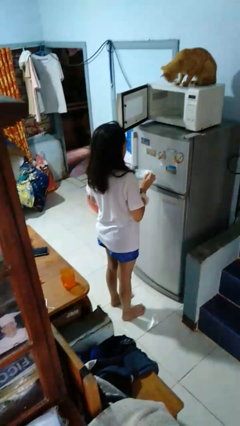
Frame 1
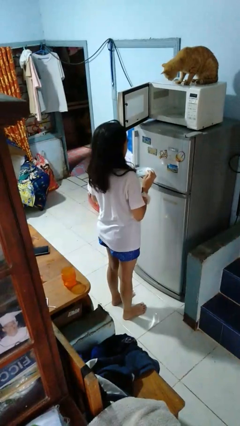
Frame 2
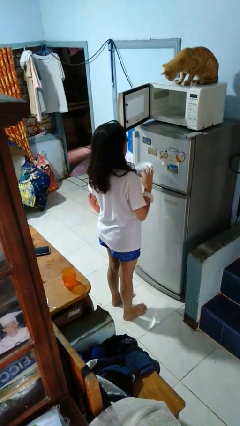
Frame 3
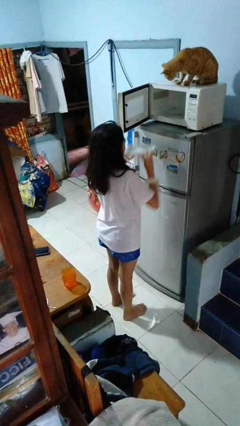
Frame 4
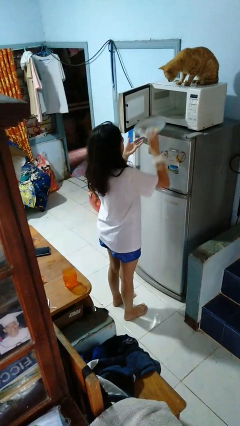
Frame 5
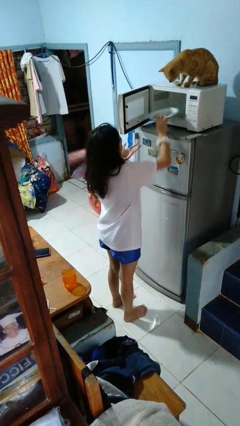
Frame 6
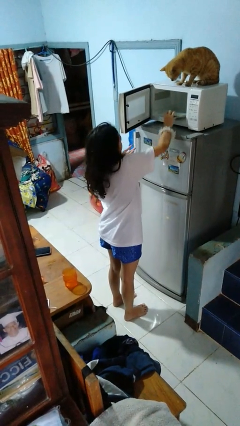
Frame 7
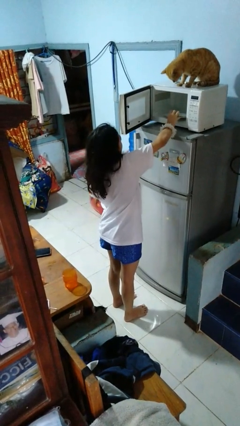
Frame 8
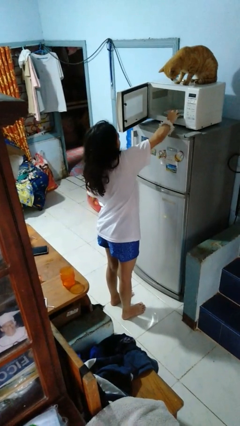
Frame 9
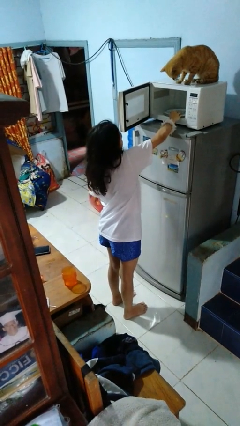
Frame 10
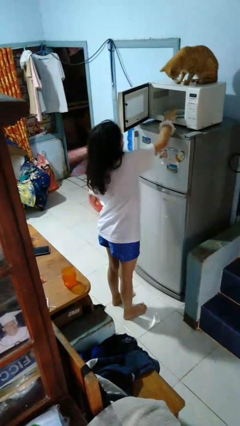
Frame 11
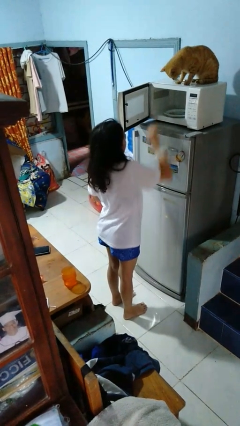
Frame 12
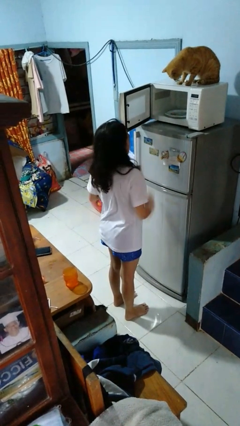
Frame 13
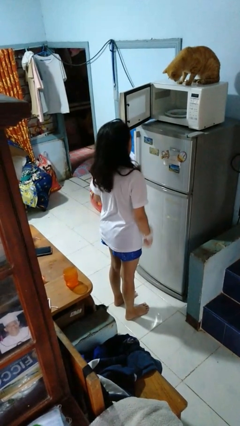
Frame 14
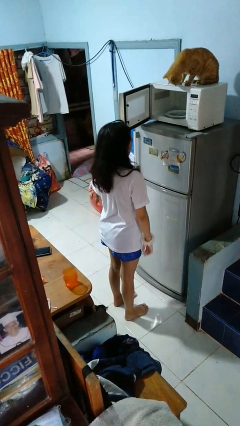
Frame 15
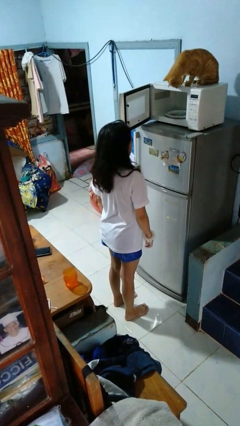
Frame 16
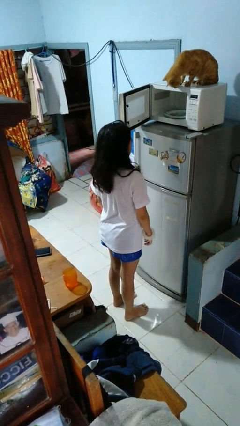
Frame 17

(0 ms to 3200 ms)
person puts object into microwave

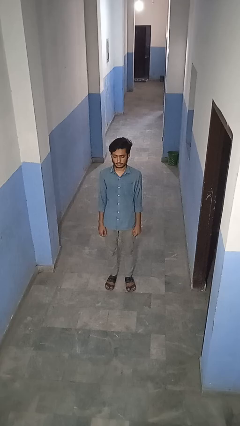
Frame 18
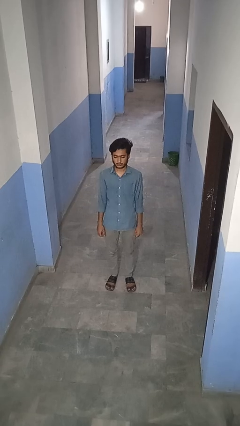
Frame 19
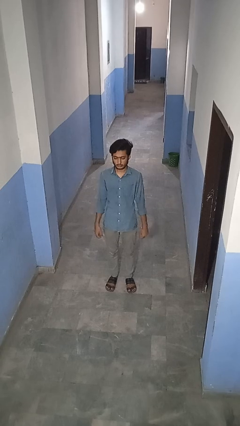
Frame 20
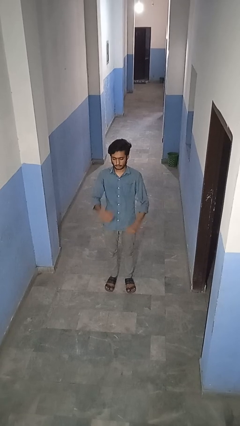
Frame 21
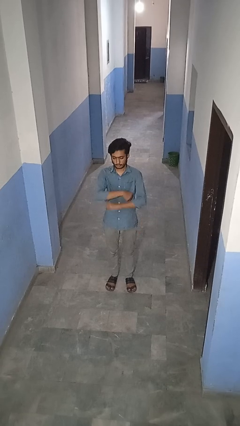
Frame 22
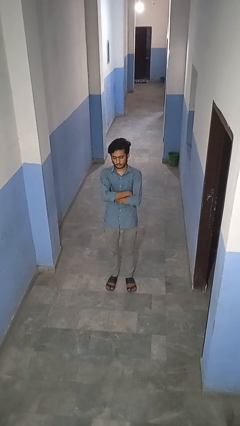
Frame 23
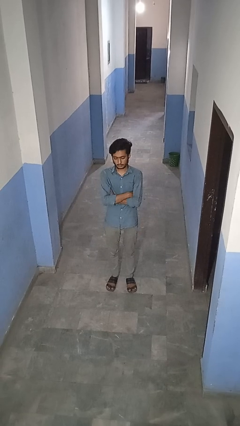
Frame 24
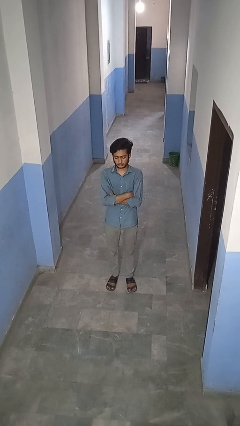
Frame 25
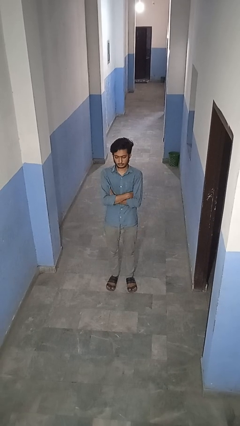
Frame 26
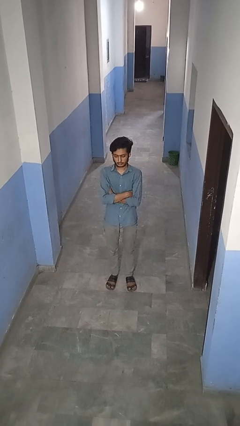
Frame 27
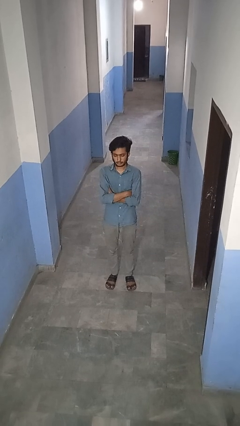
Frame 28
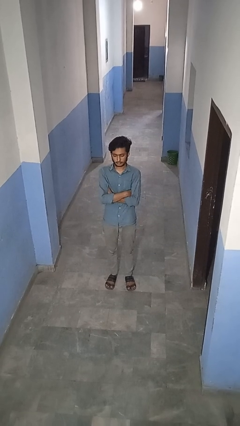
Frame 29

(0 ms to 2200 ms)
person crosses arms

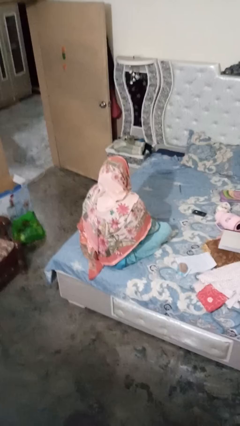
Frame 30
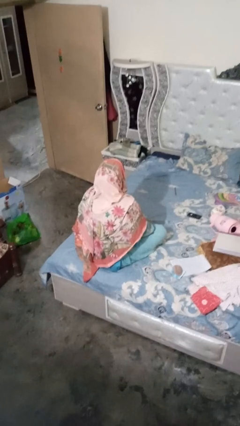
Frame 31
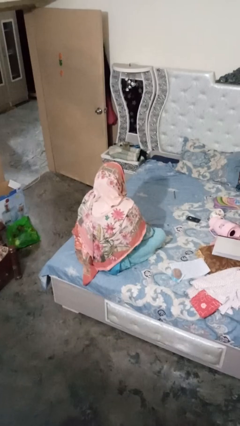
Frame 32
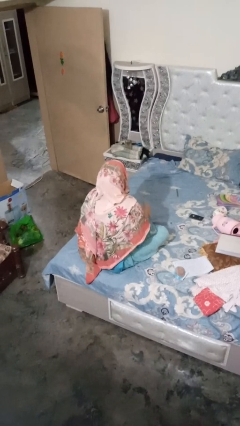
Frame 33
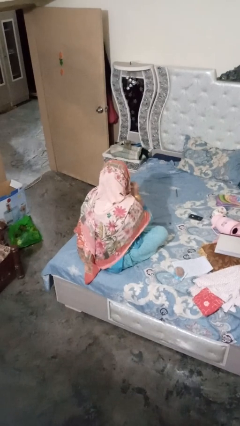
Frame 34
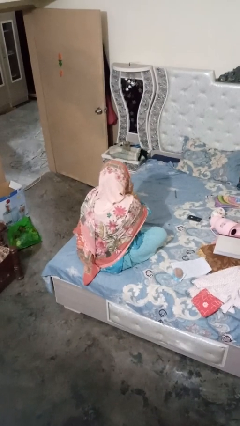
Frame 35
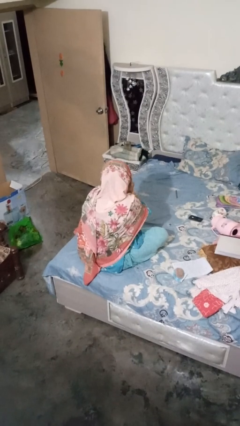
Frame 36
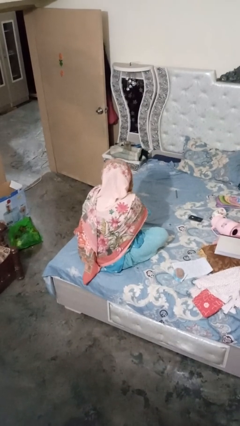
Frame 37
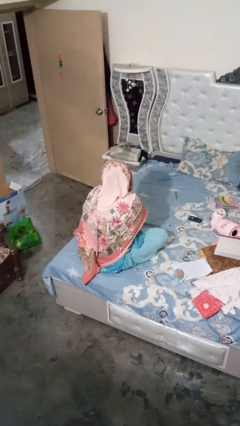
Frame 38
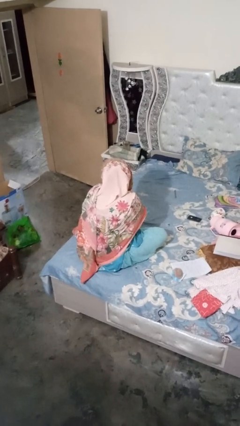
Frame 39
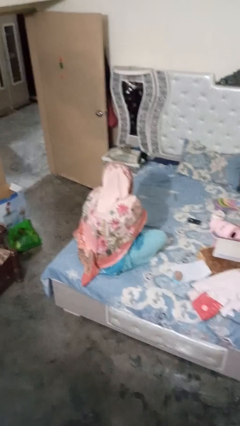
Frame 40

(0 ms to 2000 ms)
person gestures listen closely

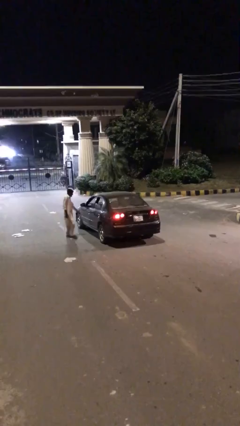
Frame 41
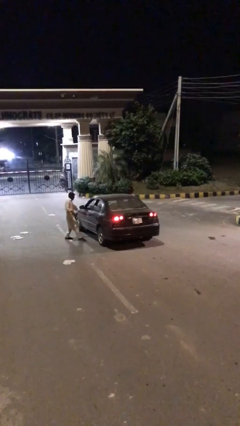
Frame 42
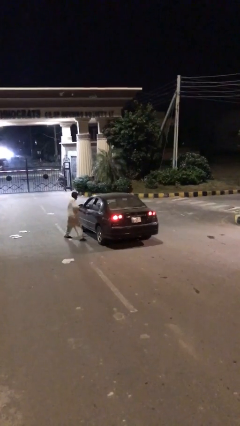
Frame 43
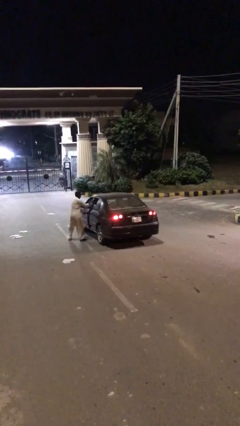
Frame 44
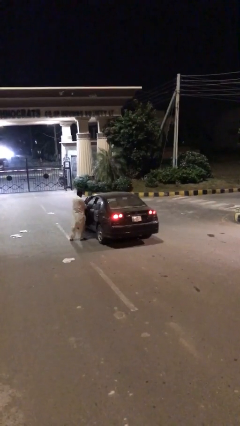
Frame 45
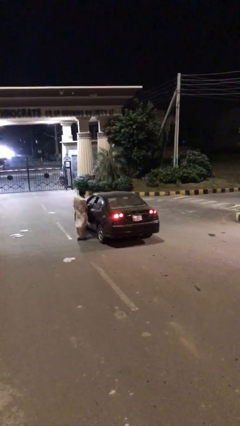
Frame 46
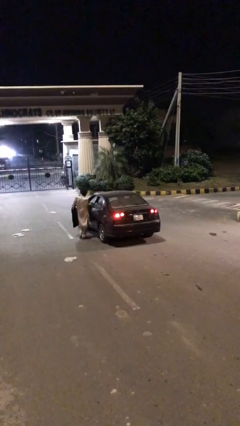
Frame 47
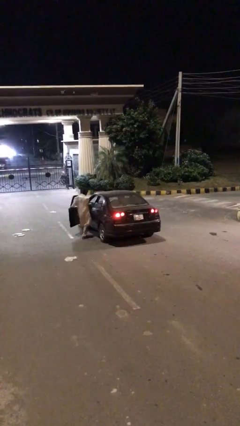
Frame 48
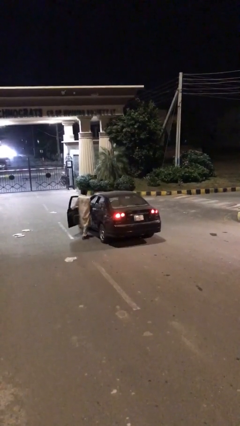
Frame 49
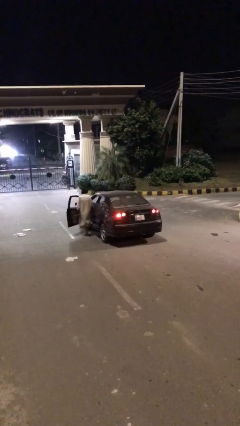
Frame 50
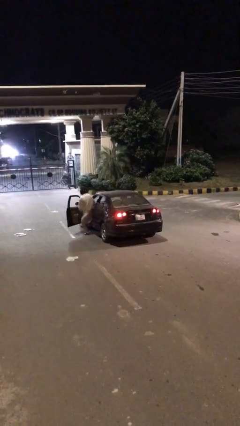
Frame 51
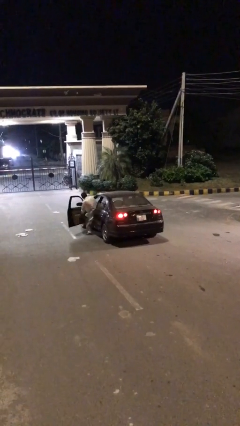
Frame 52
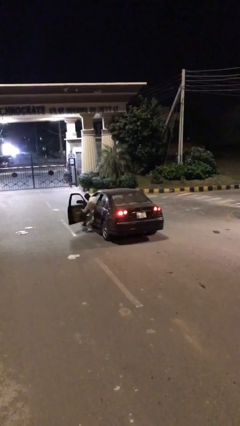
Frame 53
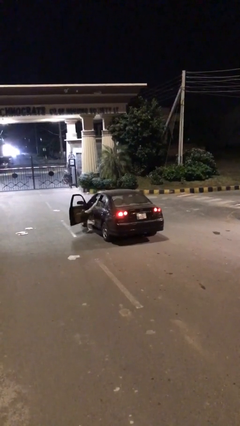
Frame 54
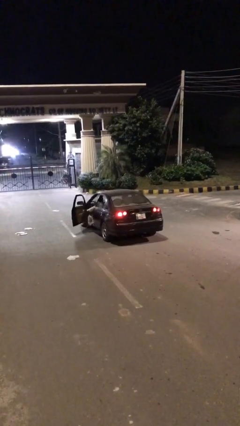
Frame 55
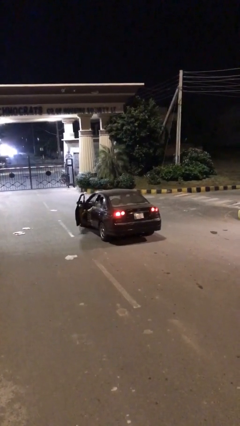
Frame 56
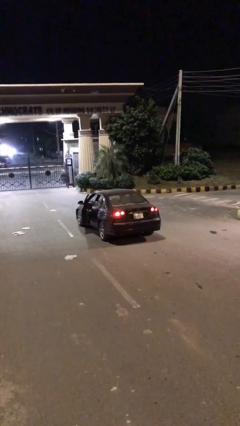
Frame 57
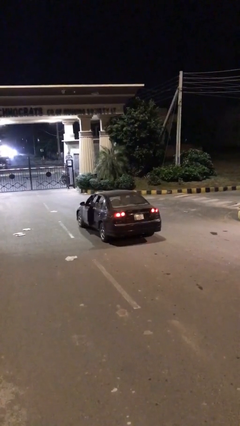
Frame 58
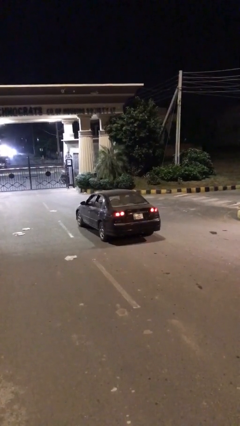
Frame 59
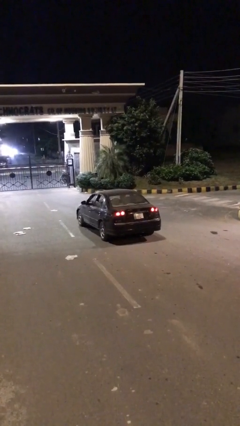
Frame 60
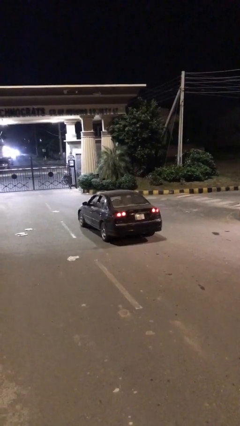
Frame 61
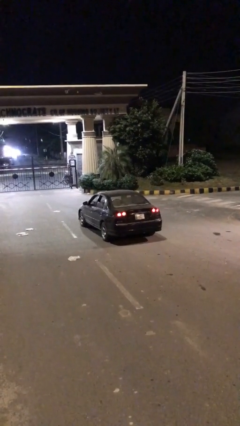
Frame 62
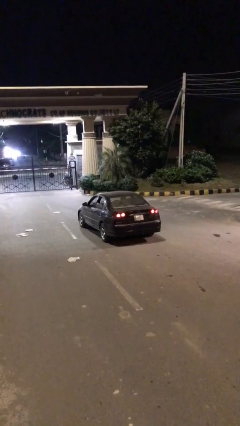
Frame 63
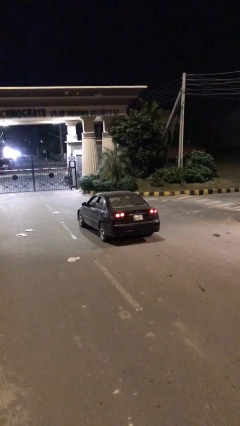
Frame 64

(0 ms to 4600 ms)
car picks up person

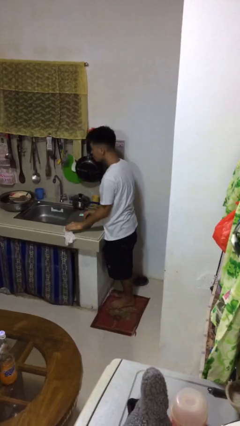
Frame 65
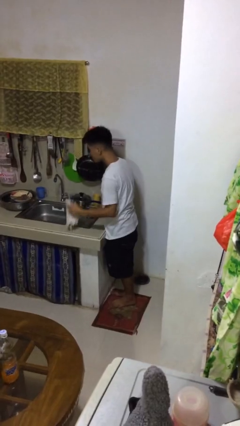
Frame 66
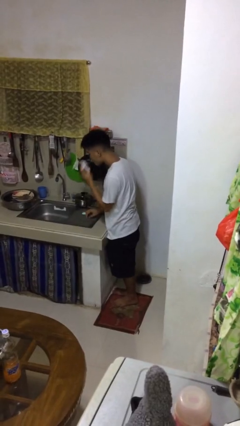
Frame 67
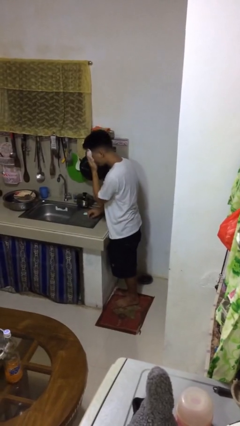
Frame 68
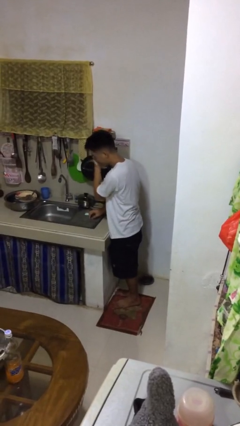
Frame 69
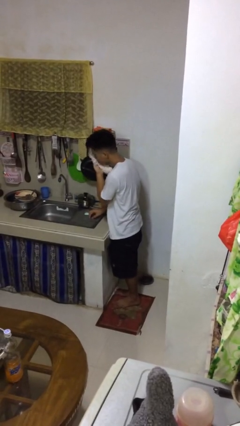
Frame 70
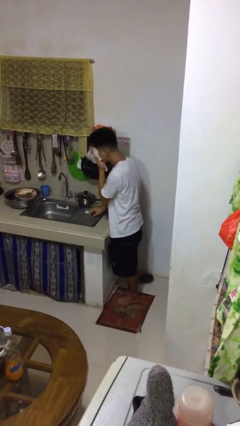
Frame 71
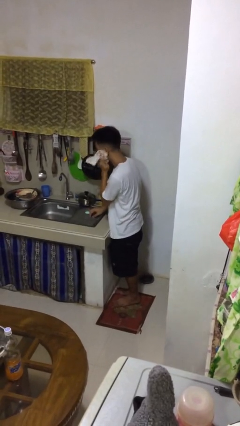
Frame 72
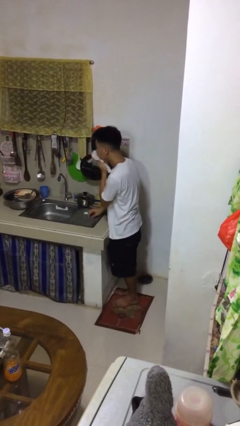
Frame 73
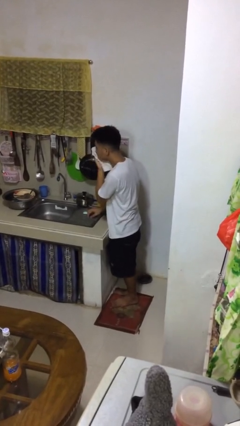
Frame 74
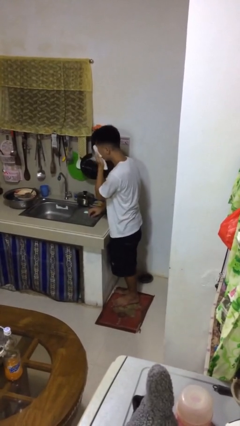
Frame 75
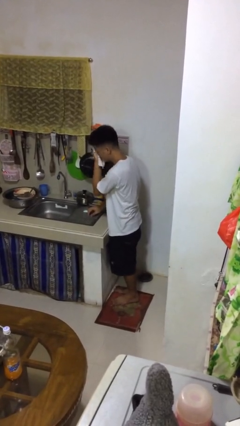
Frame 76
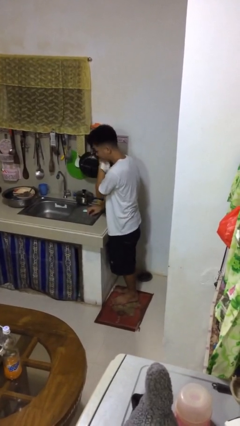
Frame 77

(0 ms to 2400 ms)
person dries face with towel

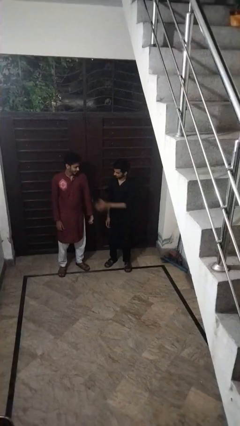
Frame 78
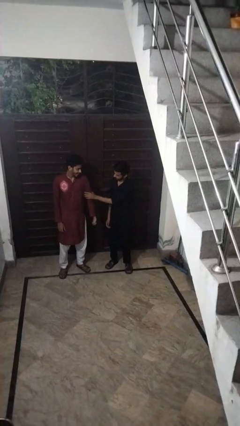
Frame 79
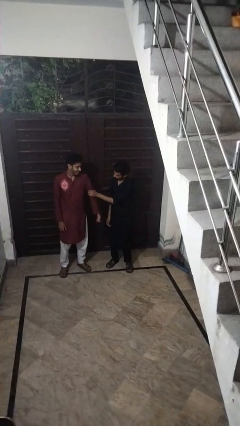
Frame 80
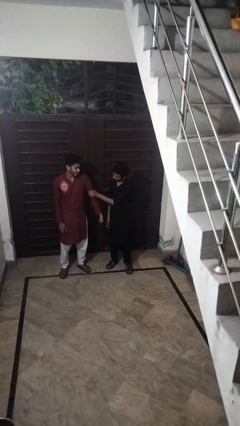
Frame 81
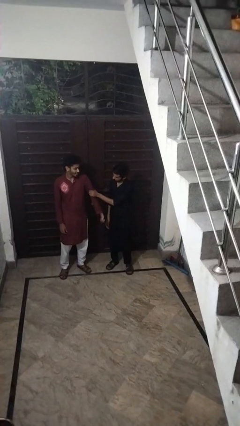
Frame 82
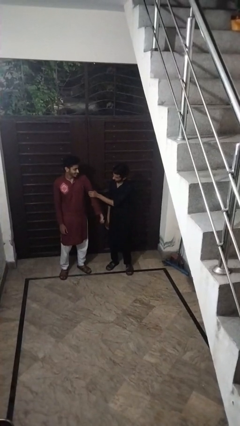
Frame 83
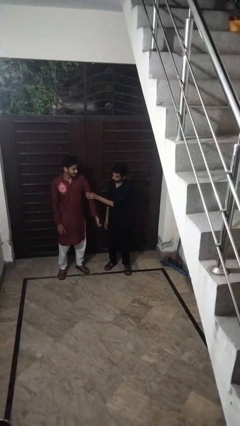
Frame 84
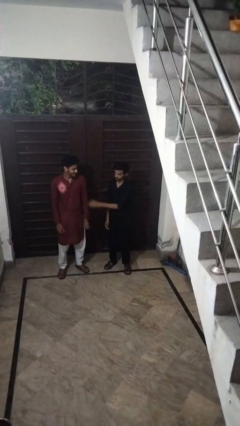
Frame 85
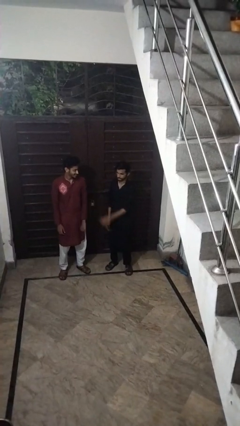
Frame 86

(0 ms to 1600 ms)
person grabs person by bicep

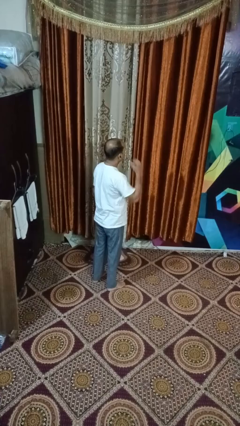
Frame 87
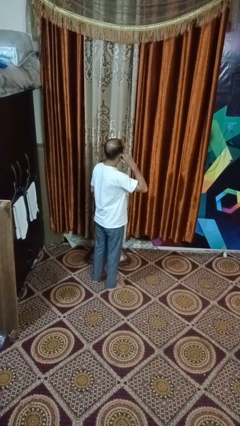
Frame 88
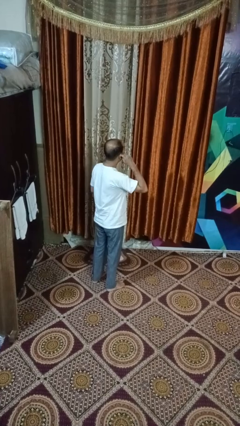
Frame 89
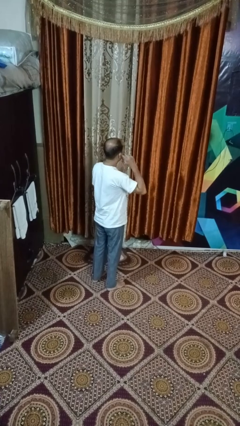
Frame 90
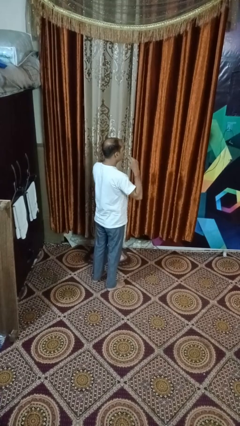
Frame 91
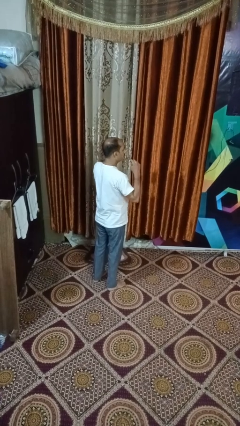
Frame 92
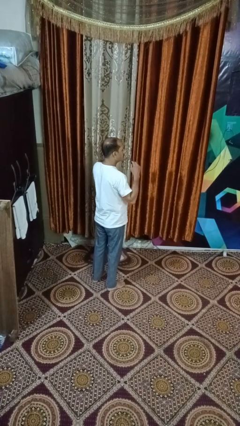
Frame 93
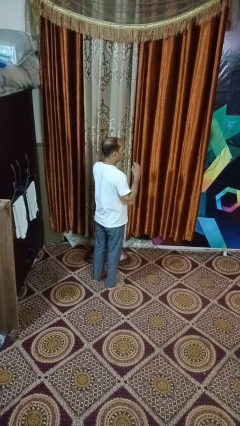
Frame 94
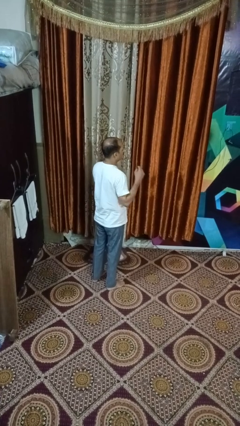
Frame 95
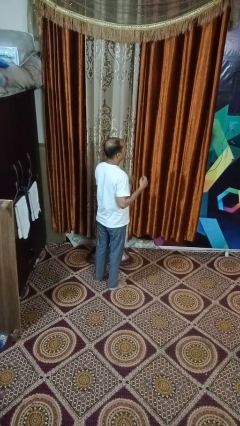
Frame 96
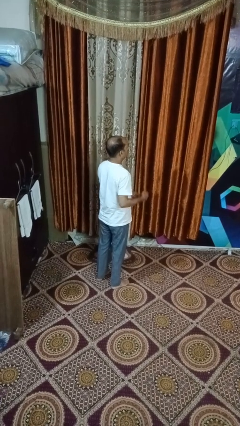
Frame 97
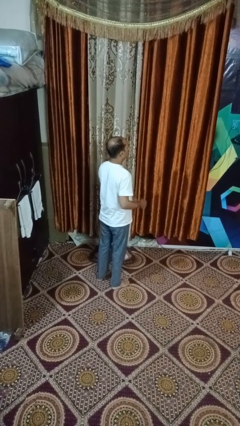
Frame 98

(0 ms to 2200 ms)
person takes off headphones
